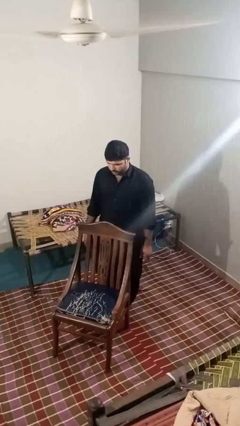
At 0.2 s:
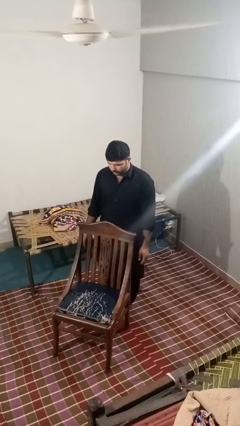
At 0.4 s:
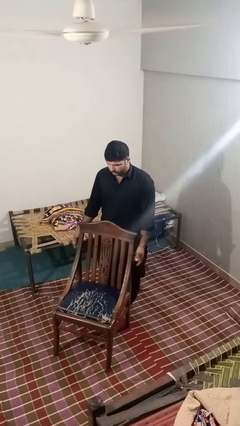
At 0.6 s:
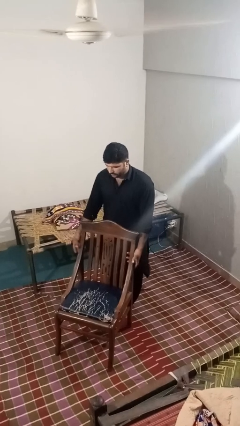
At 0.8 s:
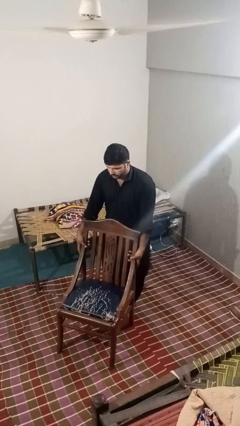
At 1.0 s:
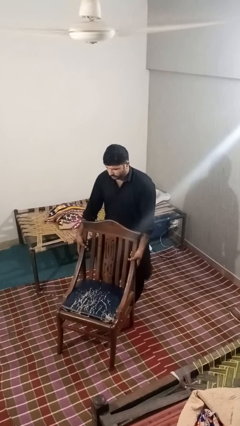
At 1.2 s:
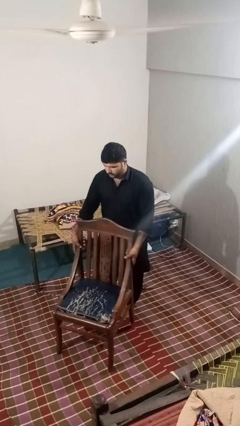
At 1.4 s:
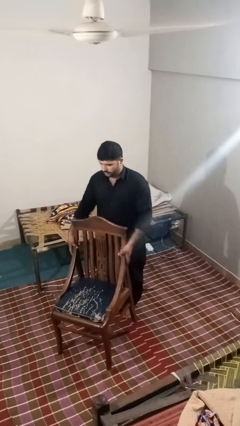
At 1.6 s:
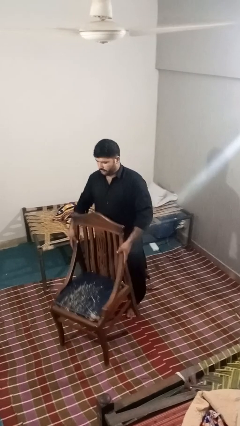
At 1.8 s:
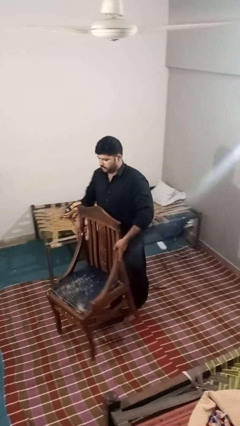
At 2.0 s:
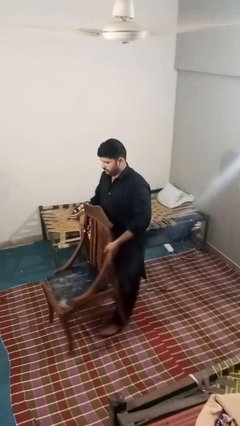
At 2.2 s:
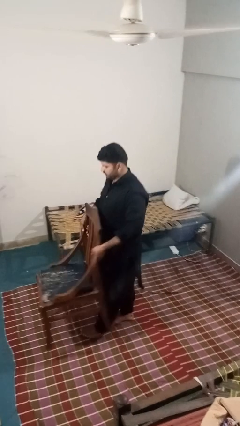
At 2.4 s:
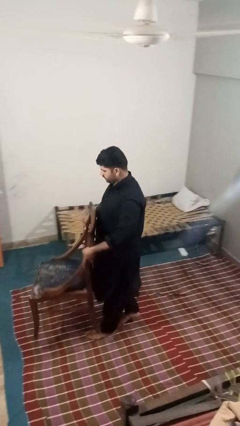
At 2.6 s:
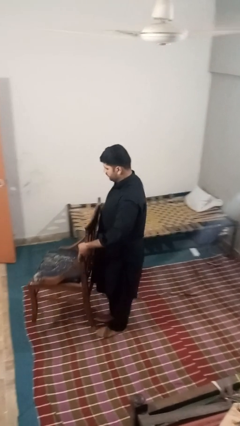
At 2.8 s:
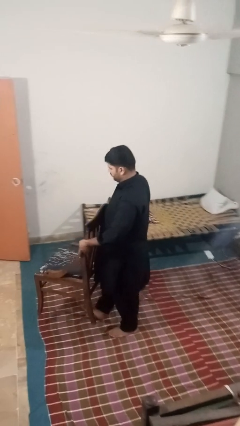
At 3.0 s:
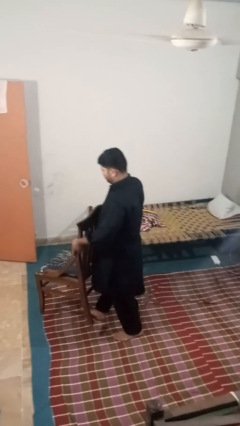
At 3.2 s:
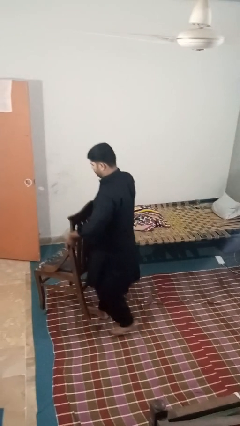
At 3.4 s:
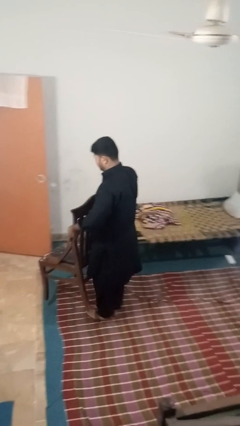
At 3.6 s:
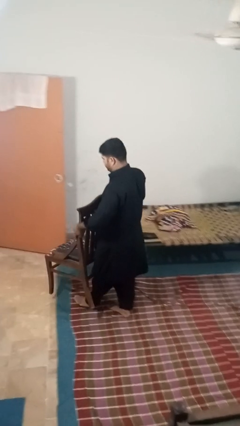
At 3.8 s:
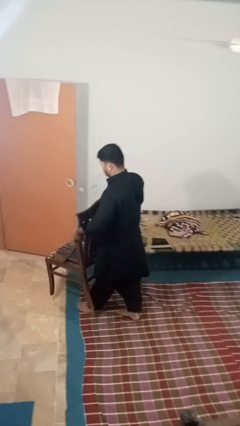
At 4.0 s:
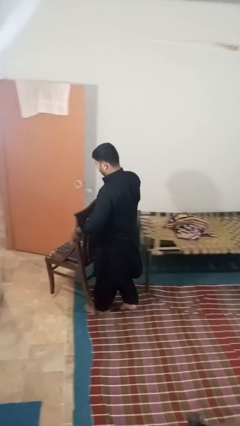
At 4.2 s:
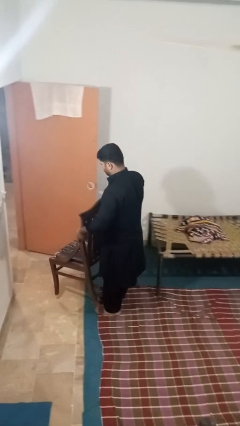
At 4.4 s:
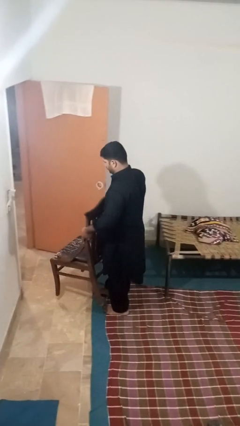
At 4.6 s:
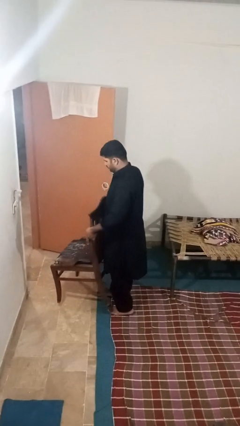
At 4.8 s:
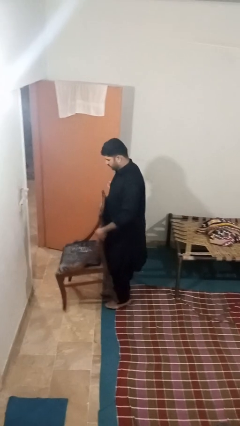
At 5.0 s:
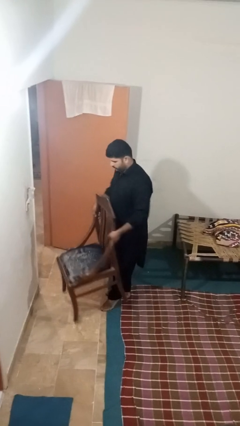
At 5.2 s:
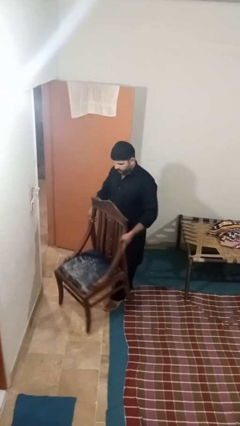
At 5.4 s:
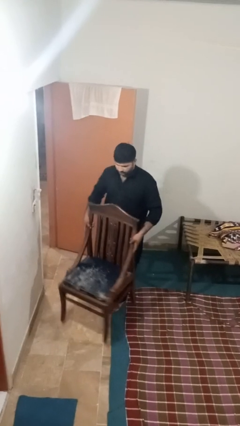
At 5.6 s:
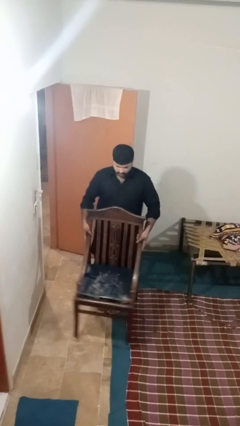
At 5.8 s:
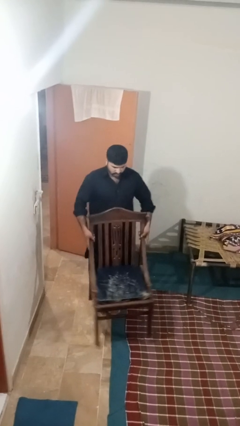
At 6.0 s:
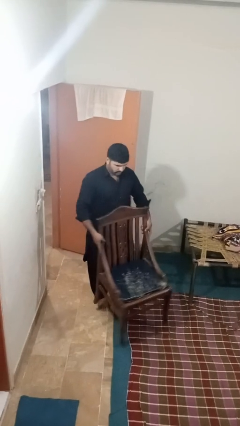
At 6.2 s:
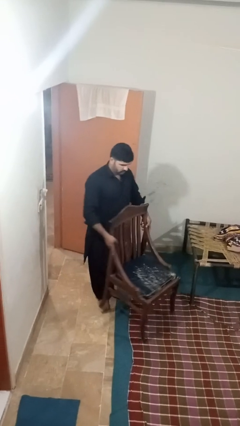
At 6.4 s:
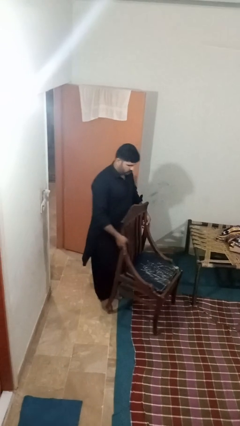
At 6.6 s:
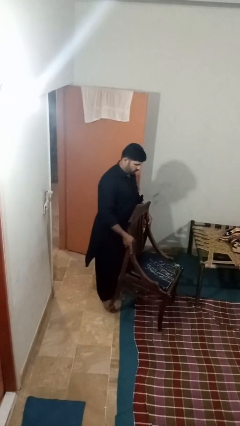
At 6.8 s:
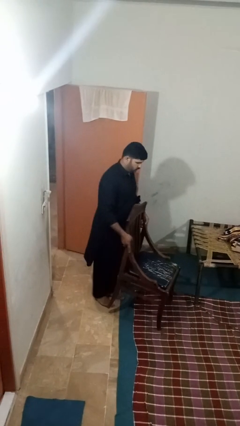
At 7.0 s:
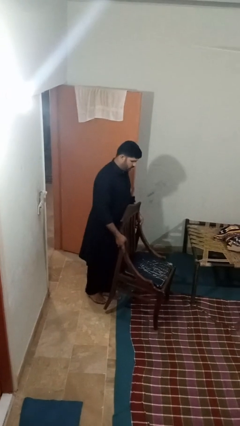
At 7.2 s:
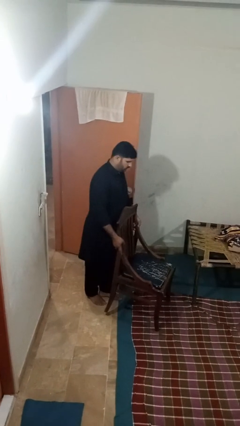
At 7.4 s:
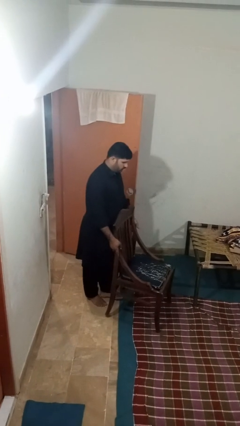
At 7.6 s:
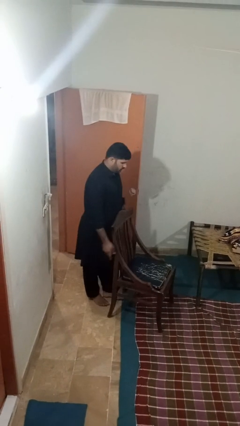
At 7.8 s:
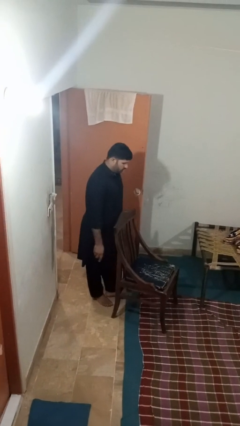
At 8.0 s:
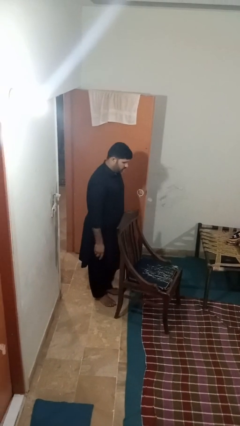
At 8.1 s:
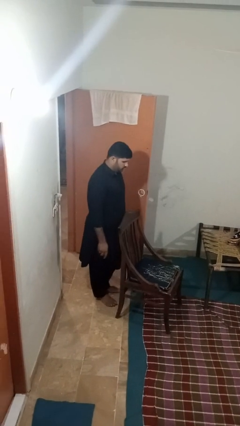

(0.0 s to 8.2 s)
person carries furniture

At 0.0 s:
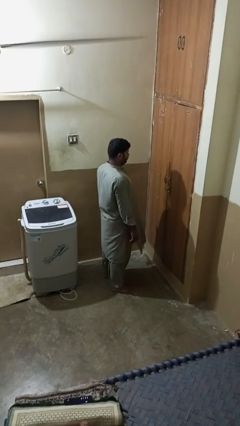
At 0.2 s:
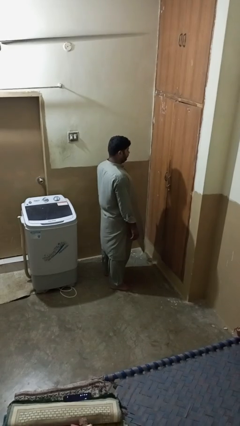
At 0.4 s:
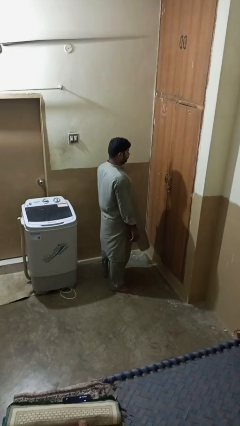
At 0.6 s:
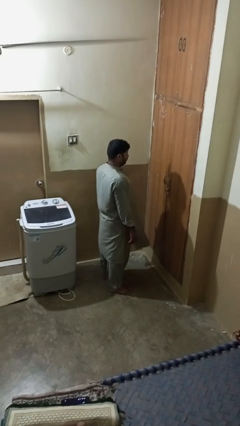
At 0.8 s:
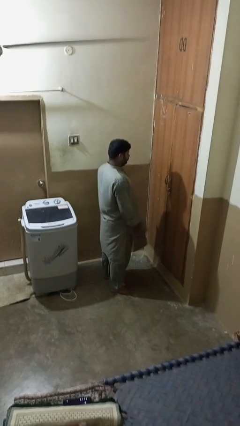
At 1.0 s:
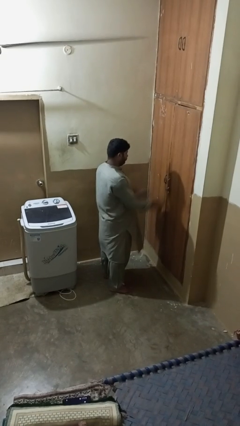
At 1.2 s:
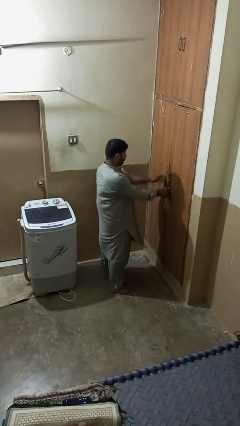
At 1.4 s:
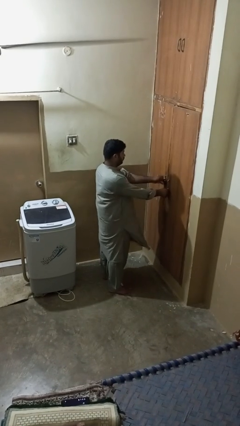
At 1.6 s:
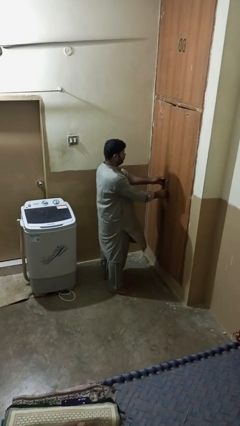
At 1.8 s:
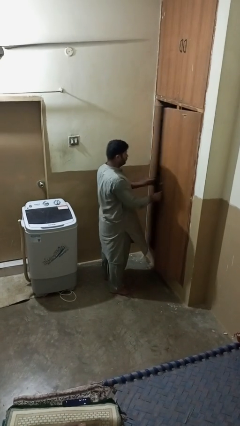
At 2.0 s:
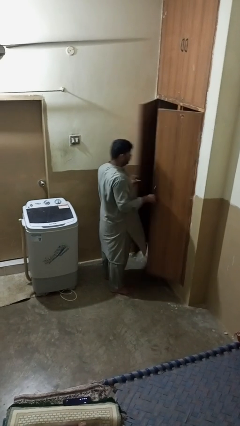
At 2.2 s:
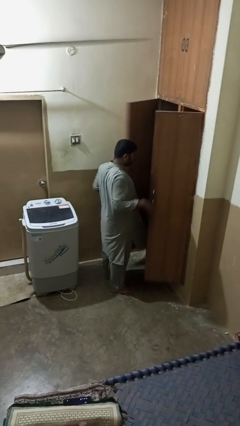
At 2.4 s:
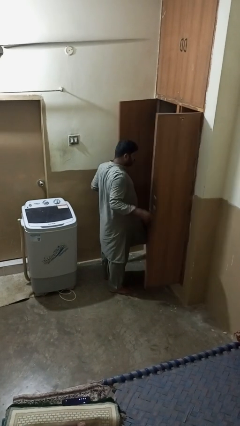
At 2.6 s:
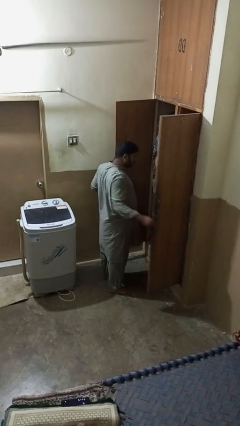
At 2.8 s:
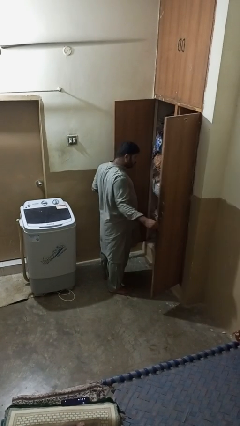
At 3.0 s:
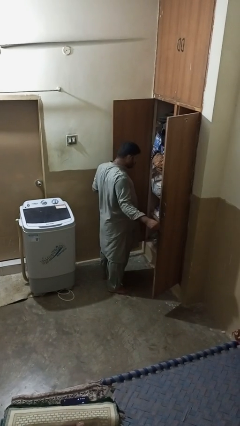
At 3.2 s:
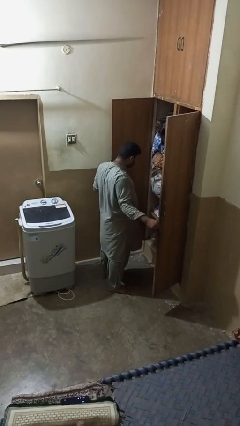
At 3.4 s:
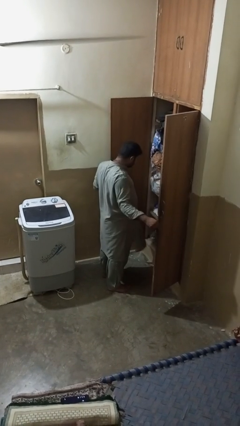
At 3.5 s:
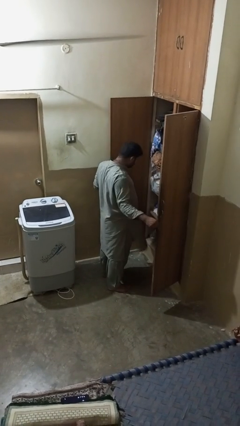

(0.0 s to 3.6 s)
person opens closet door

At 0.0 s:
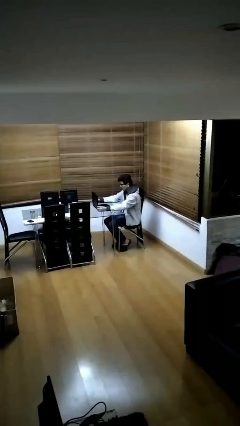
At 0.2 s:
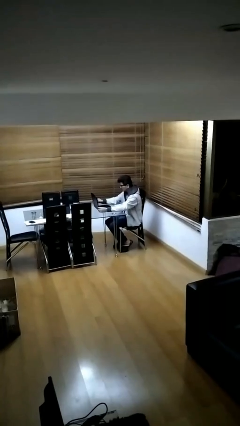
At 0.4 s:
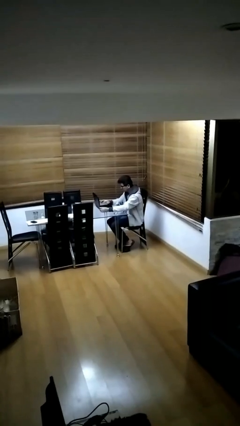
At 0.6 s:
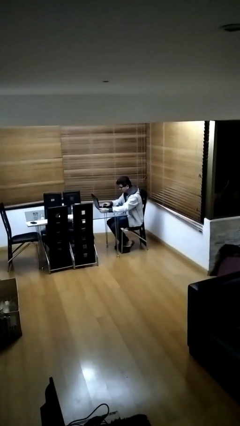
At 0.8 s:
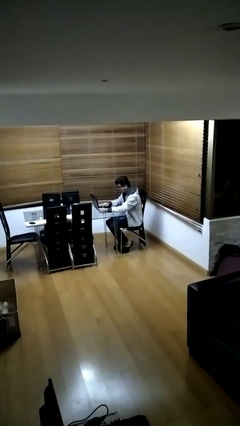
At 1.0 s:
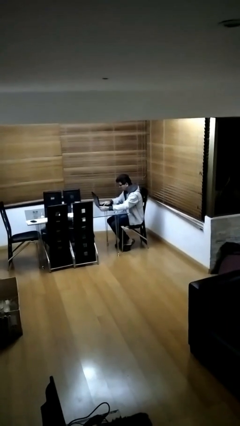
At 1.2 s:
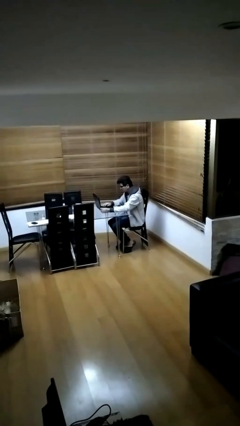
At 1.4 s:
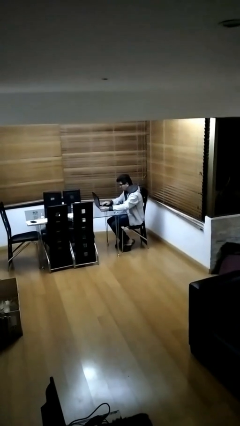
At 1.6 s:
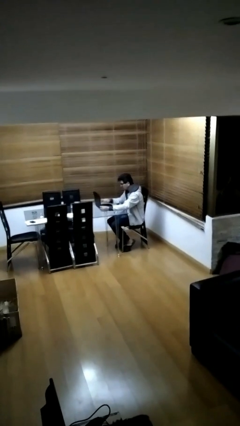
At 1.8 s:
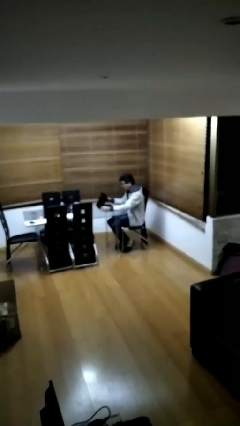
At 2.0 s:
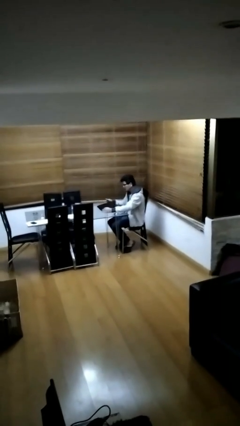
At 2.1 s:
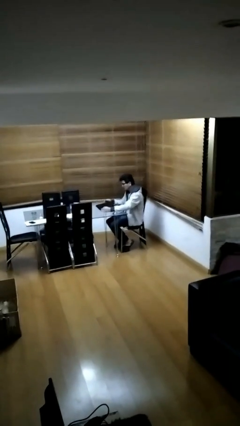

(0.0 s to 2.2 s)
person interacts with laptop

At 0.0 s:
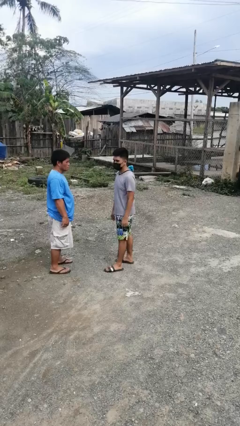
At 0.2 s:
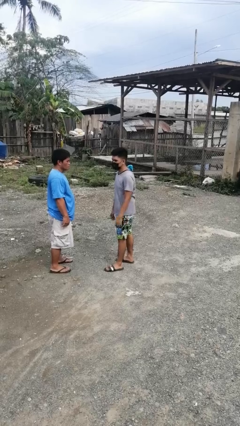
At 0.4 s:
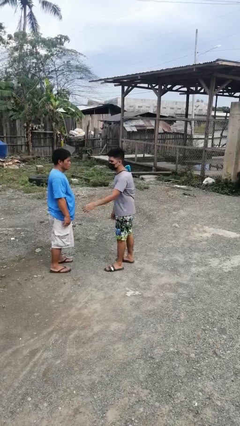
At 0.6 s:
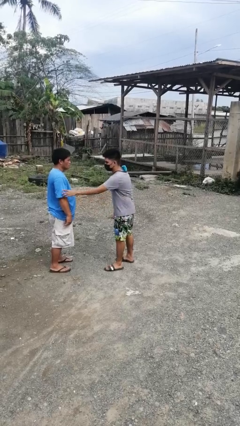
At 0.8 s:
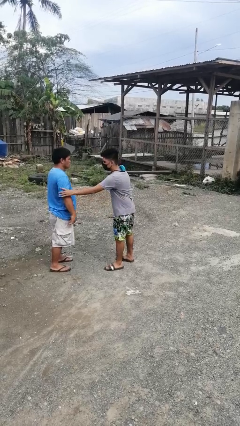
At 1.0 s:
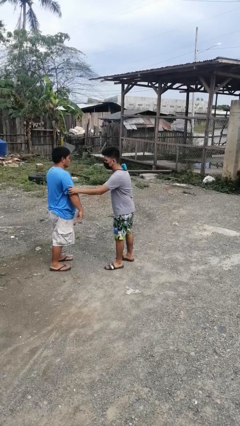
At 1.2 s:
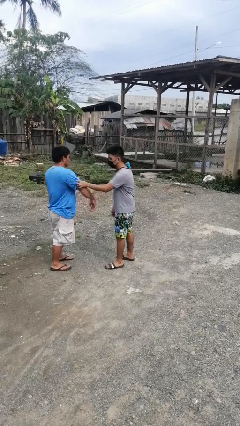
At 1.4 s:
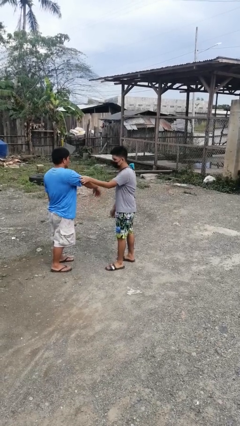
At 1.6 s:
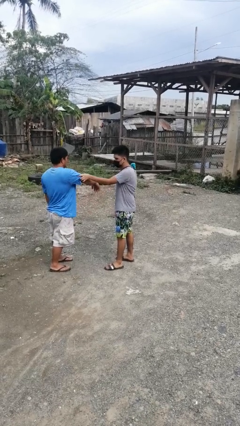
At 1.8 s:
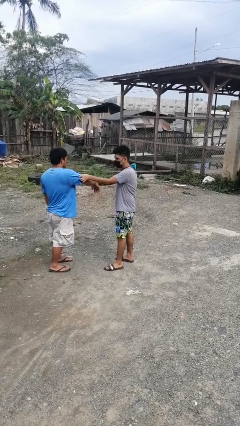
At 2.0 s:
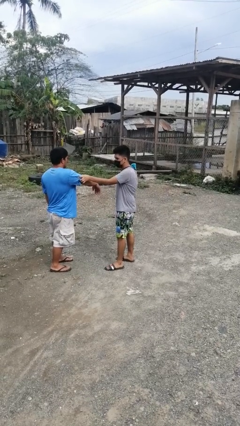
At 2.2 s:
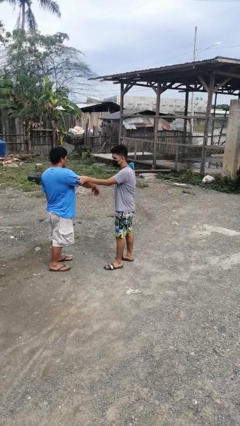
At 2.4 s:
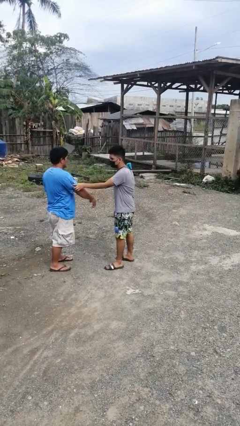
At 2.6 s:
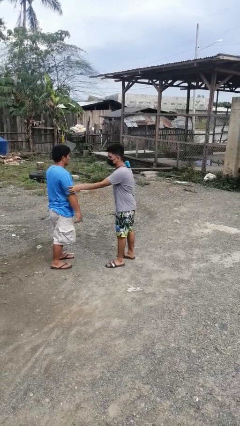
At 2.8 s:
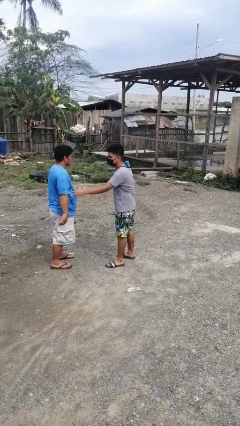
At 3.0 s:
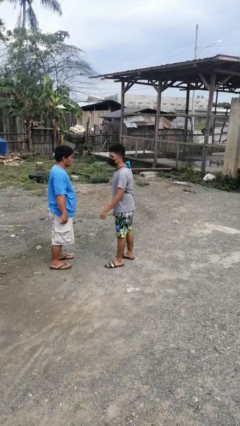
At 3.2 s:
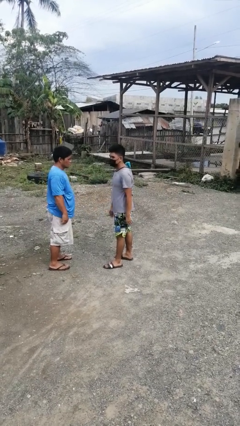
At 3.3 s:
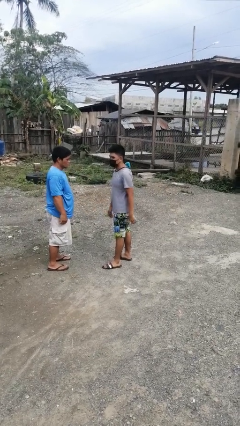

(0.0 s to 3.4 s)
person grabs person by bicep

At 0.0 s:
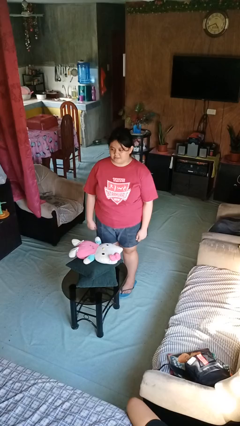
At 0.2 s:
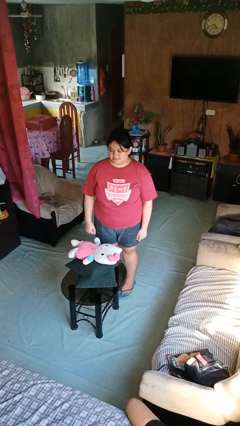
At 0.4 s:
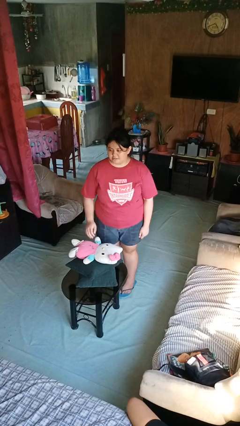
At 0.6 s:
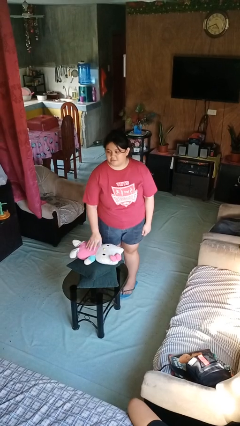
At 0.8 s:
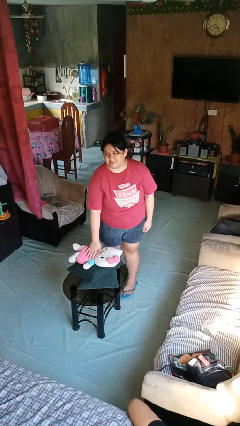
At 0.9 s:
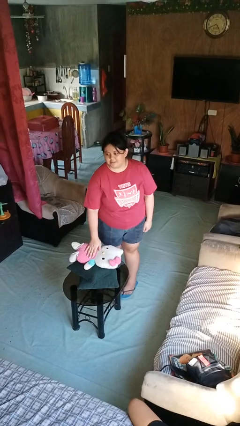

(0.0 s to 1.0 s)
person taps object with finger
